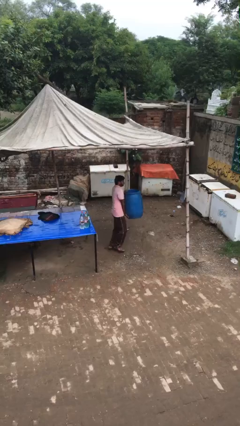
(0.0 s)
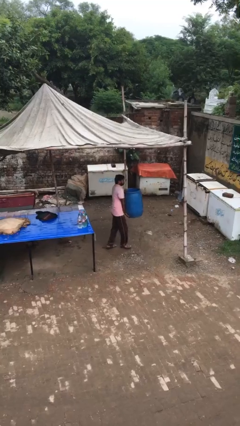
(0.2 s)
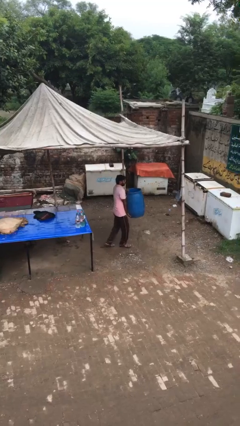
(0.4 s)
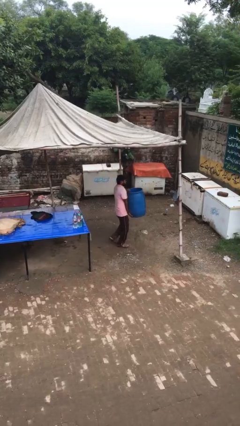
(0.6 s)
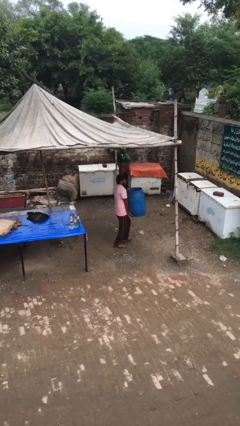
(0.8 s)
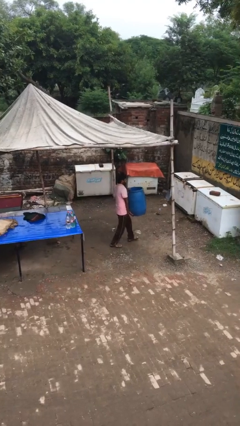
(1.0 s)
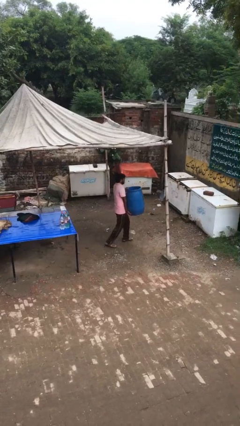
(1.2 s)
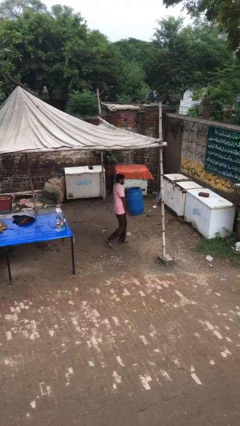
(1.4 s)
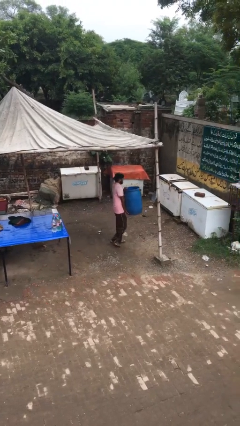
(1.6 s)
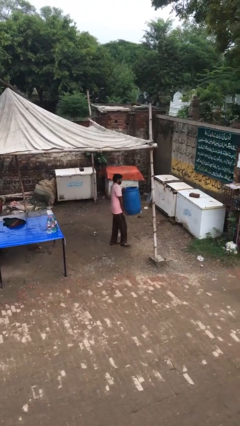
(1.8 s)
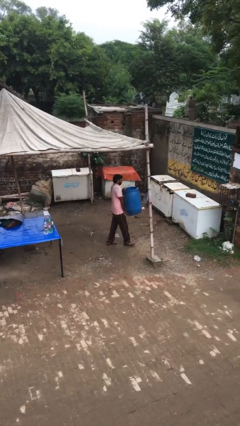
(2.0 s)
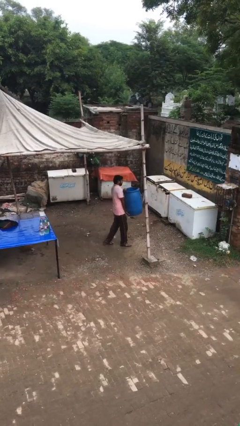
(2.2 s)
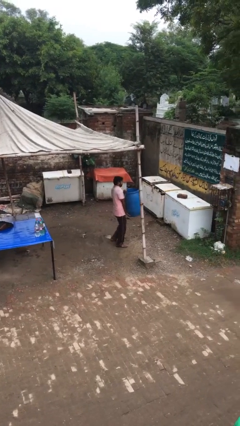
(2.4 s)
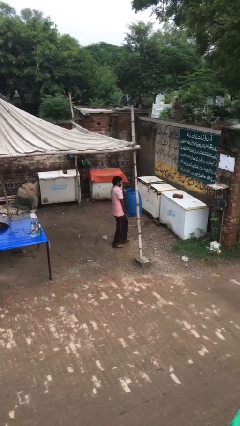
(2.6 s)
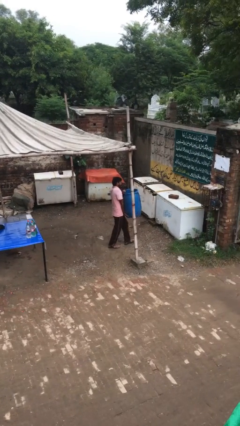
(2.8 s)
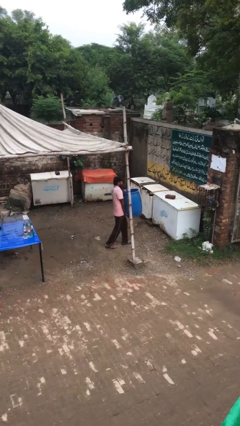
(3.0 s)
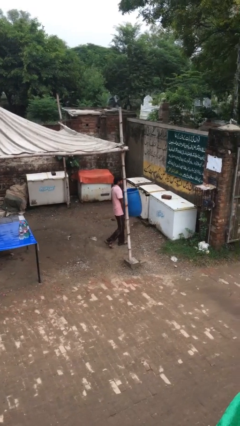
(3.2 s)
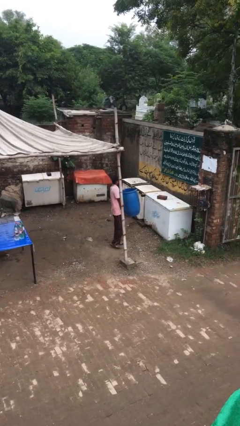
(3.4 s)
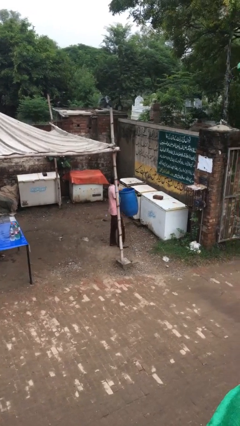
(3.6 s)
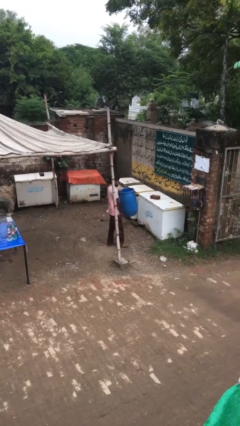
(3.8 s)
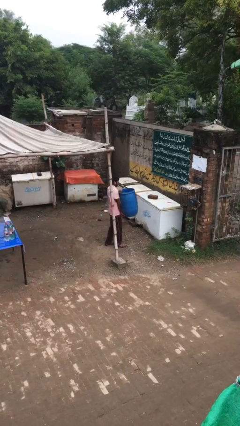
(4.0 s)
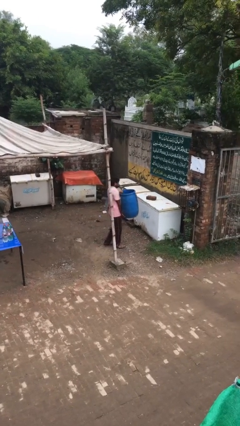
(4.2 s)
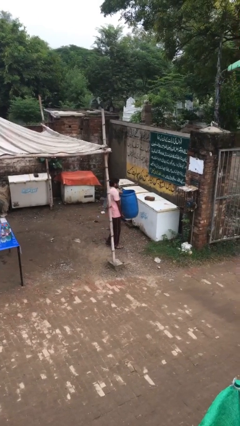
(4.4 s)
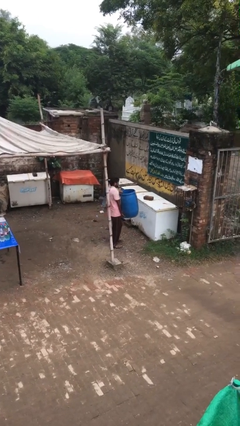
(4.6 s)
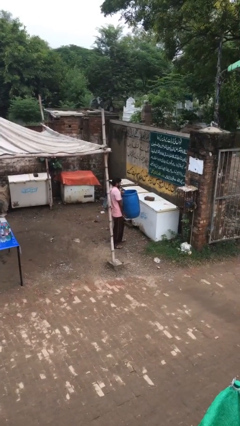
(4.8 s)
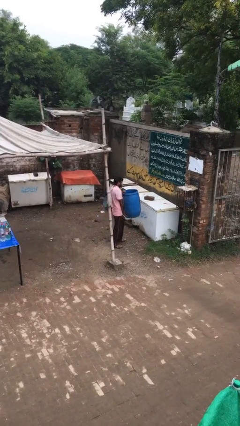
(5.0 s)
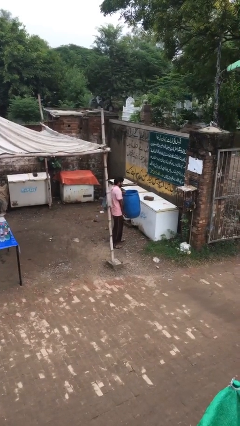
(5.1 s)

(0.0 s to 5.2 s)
person carries heavy object

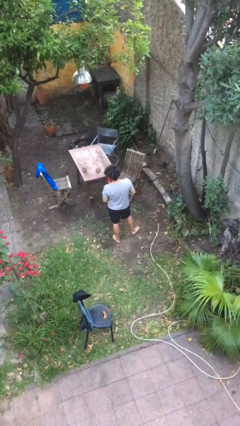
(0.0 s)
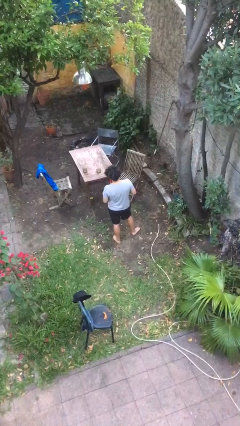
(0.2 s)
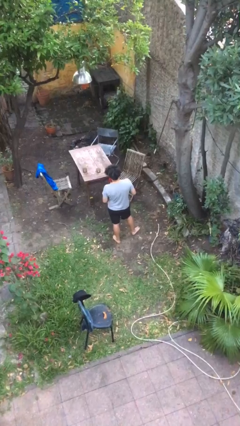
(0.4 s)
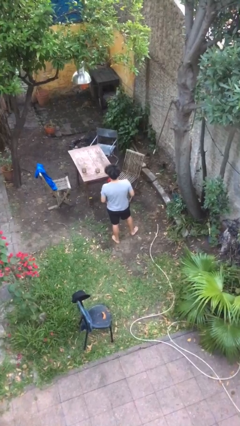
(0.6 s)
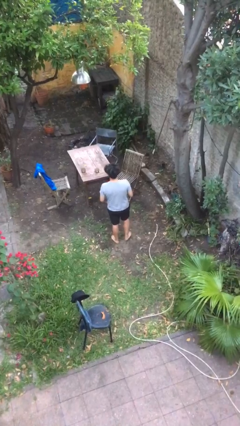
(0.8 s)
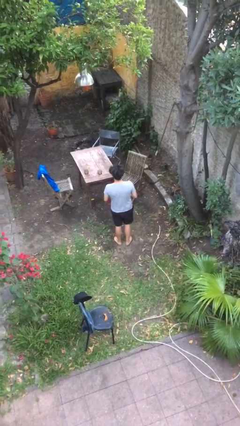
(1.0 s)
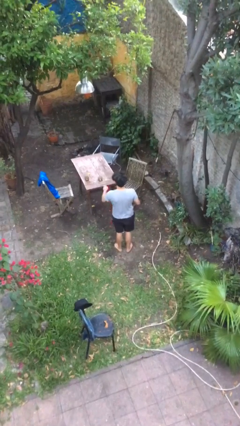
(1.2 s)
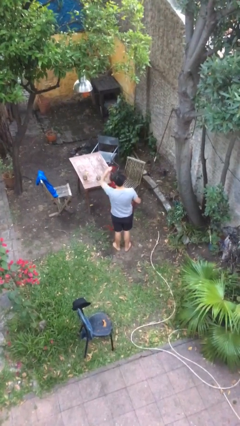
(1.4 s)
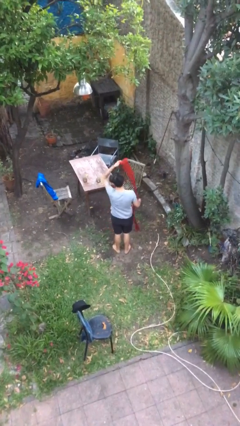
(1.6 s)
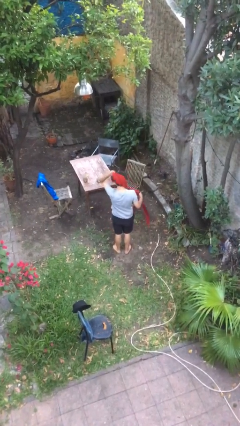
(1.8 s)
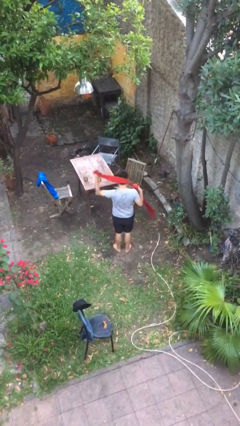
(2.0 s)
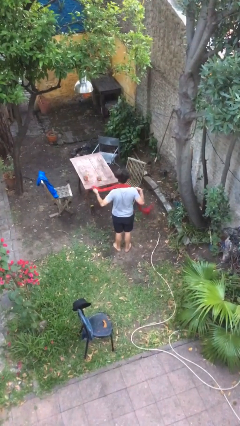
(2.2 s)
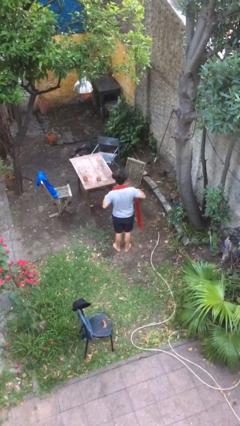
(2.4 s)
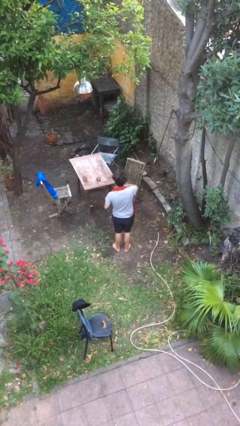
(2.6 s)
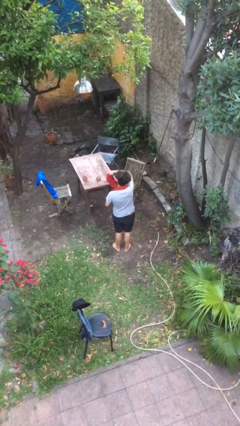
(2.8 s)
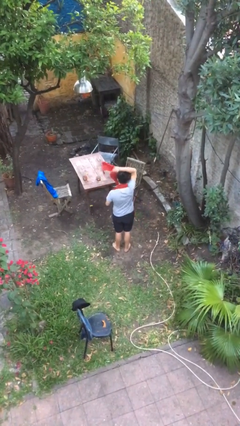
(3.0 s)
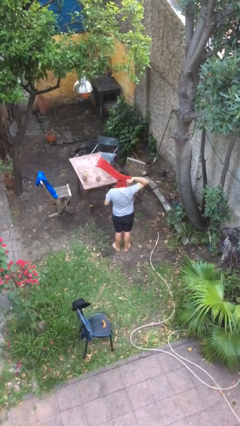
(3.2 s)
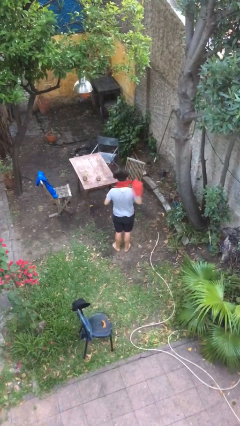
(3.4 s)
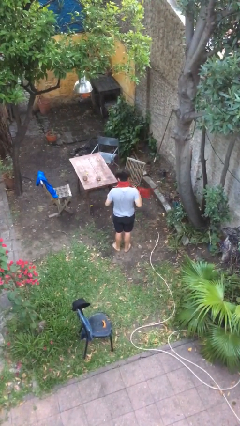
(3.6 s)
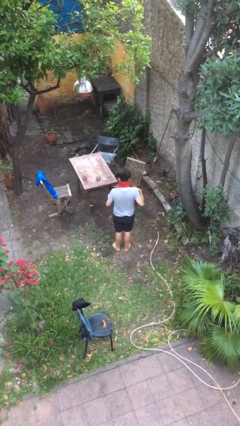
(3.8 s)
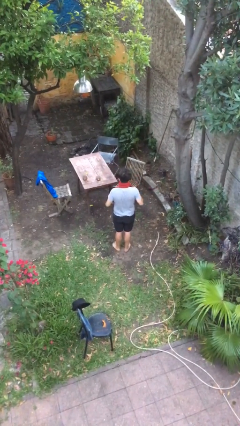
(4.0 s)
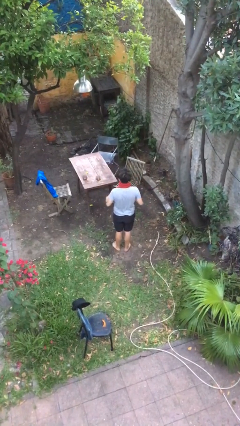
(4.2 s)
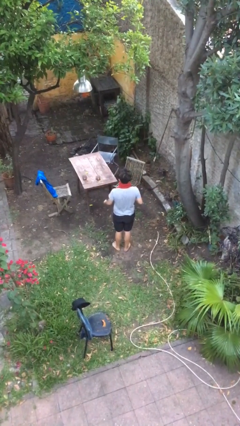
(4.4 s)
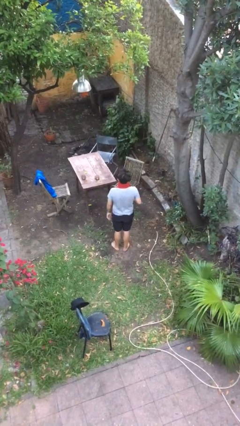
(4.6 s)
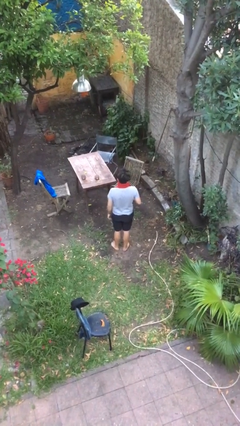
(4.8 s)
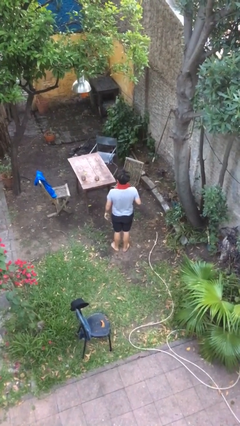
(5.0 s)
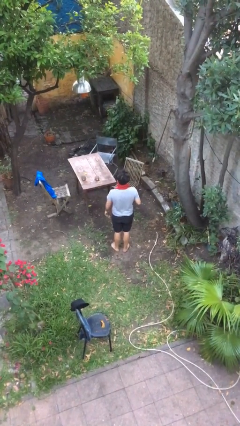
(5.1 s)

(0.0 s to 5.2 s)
person puts on scarf

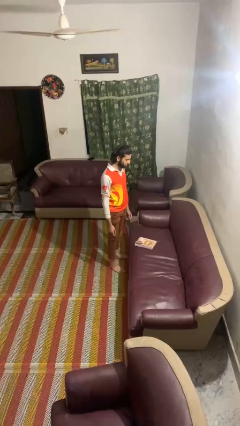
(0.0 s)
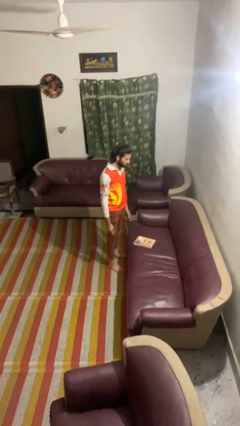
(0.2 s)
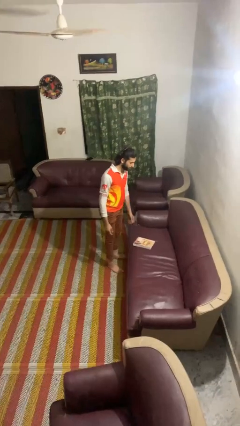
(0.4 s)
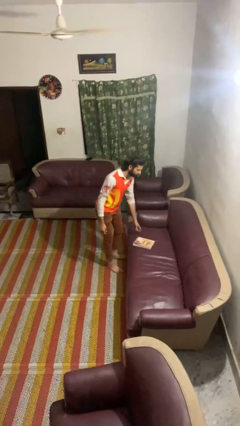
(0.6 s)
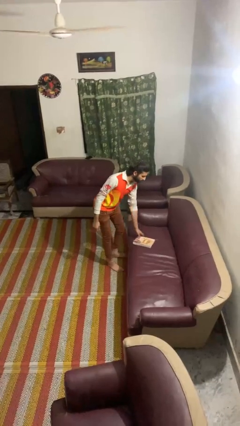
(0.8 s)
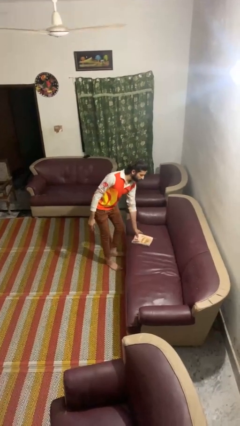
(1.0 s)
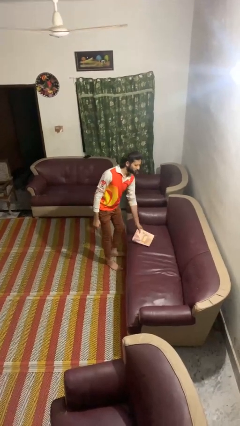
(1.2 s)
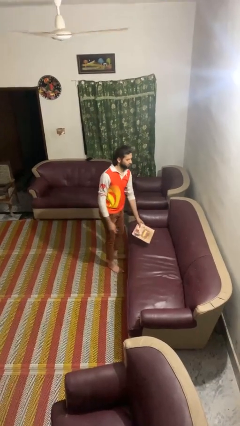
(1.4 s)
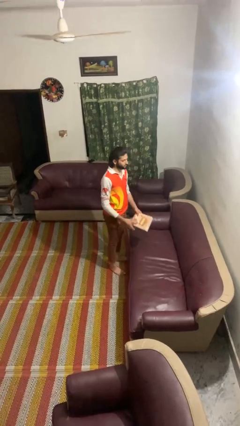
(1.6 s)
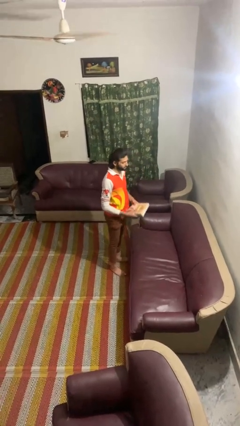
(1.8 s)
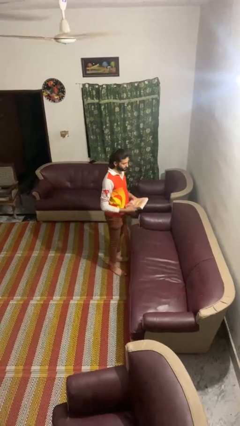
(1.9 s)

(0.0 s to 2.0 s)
person picks up object from couch

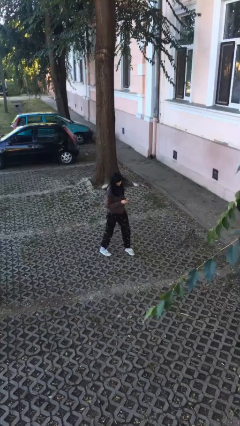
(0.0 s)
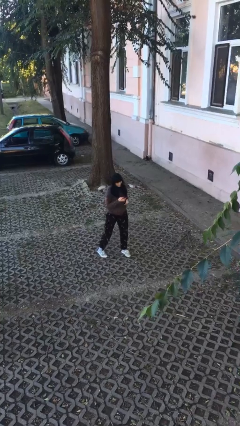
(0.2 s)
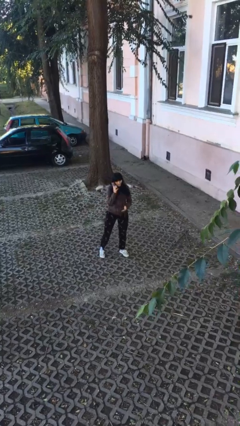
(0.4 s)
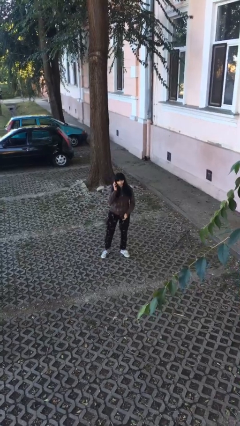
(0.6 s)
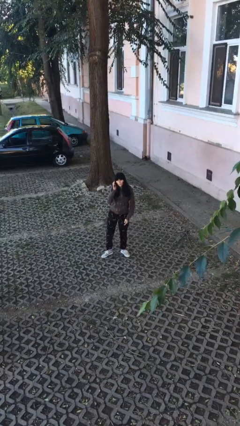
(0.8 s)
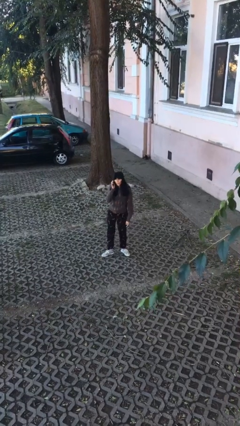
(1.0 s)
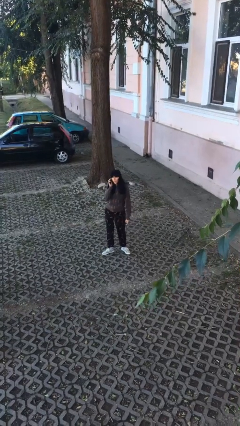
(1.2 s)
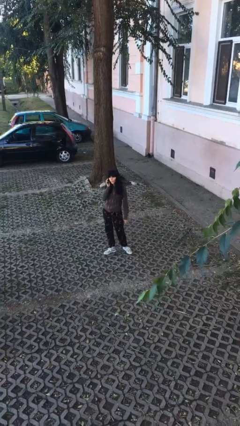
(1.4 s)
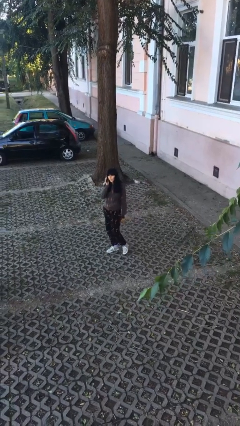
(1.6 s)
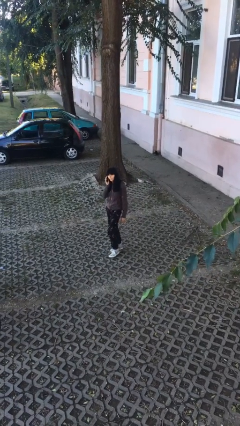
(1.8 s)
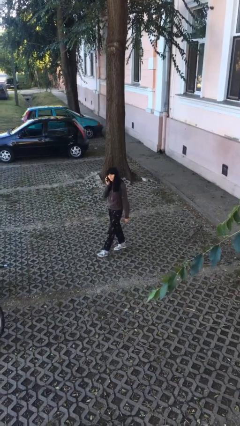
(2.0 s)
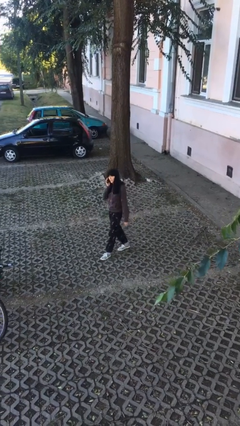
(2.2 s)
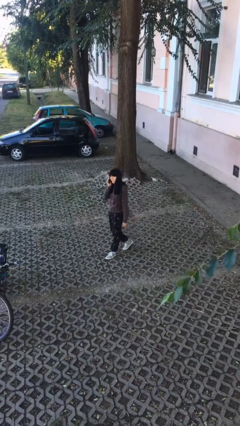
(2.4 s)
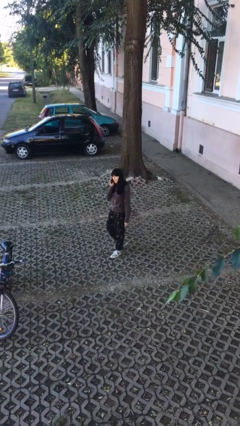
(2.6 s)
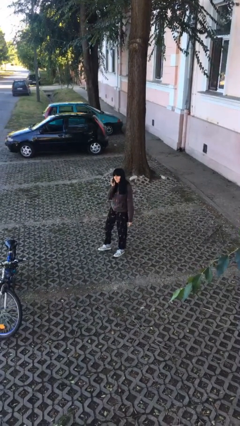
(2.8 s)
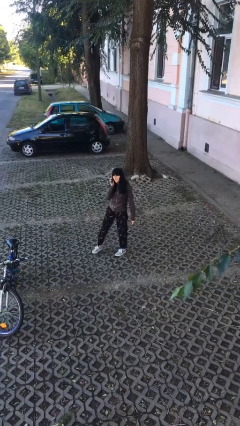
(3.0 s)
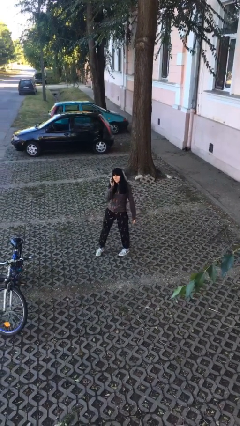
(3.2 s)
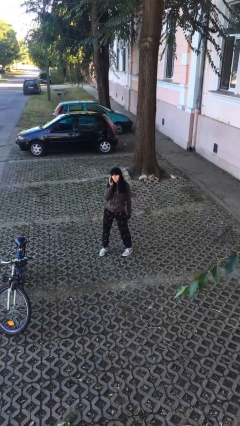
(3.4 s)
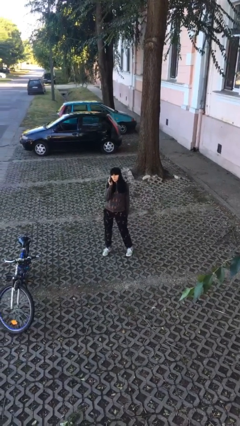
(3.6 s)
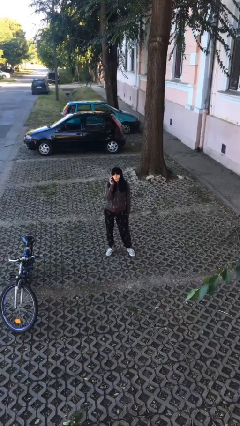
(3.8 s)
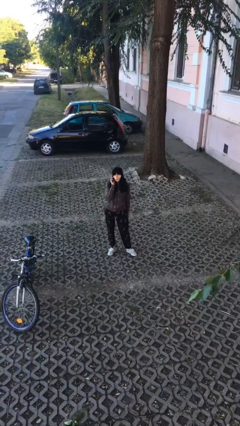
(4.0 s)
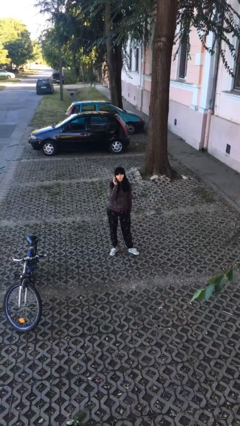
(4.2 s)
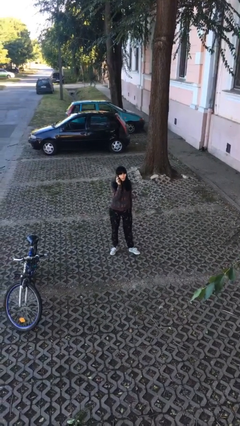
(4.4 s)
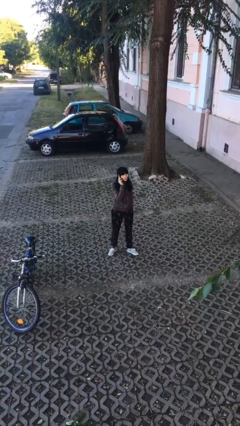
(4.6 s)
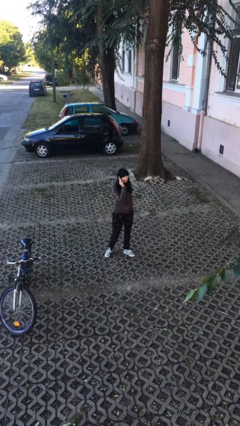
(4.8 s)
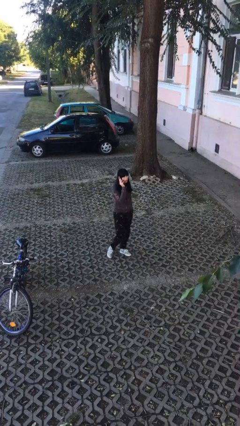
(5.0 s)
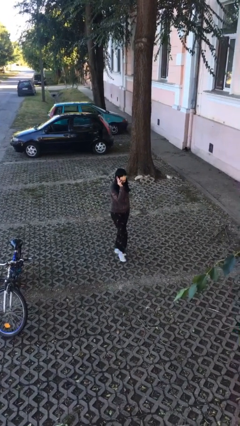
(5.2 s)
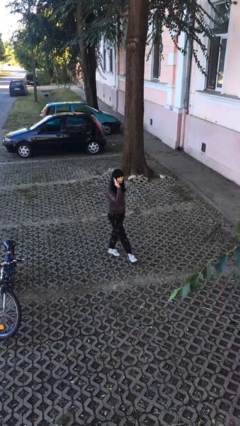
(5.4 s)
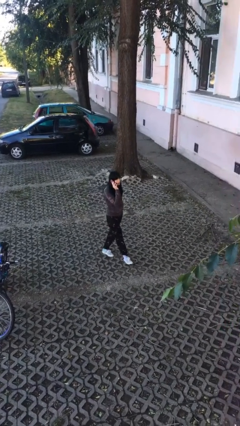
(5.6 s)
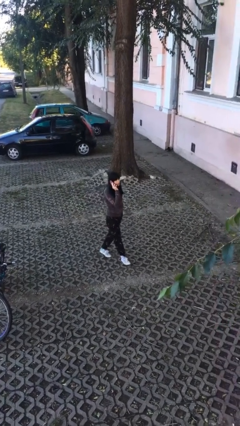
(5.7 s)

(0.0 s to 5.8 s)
person talks on phone
